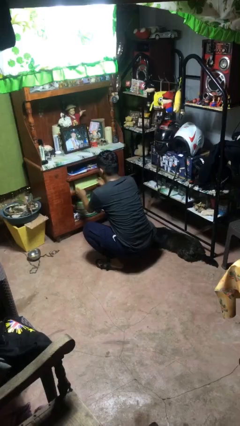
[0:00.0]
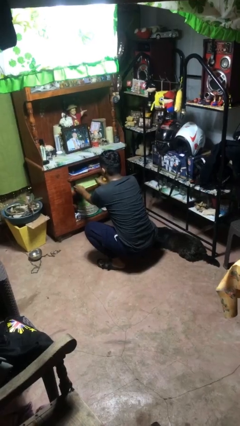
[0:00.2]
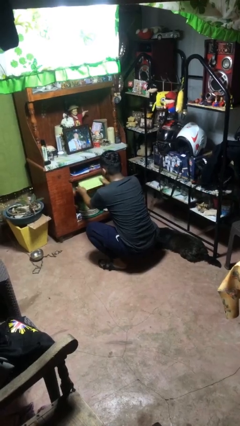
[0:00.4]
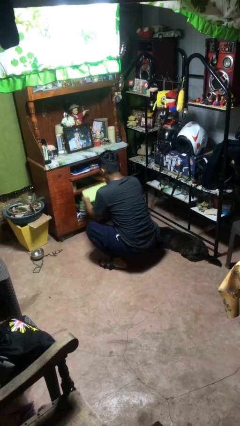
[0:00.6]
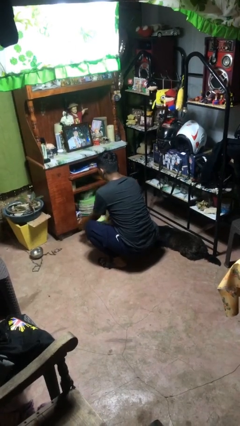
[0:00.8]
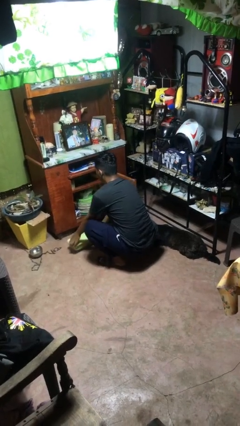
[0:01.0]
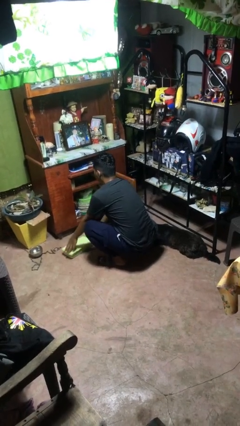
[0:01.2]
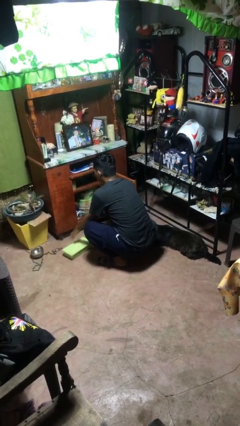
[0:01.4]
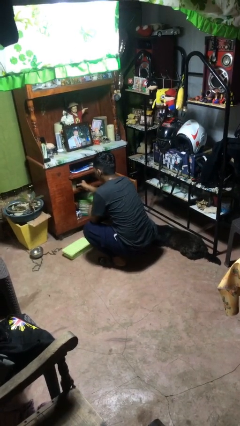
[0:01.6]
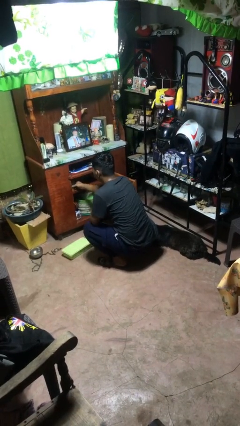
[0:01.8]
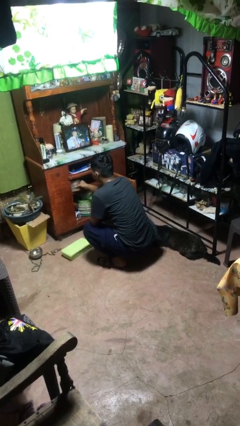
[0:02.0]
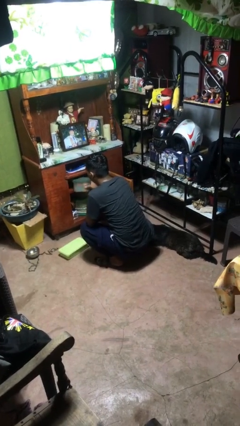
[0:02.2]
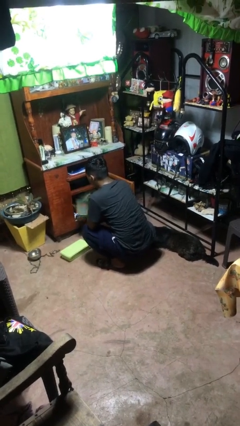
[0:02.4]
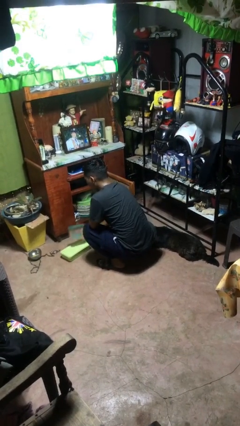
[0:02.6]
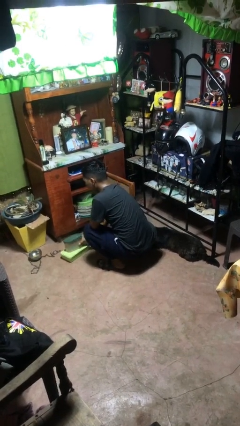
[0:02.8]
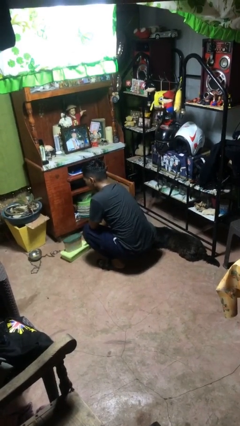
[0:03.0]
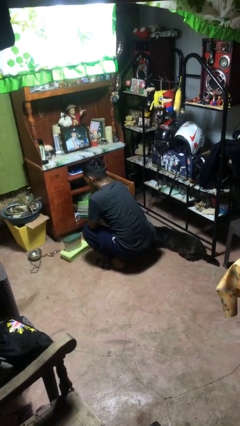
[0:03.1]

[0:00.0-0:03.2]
person takes object from cabinet

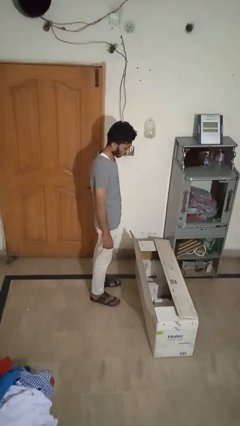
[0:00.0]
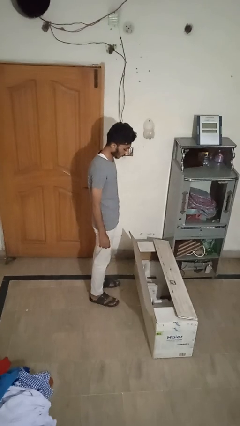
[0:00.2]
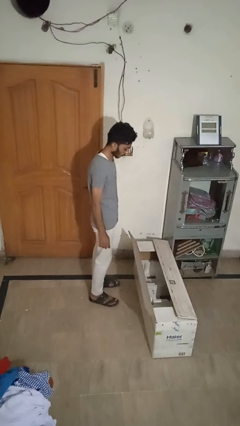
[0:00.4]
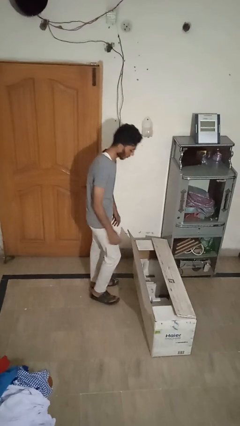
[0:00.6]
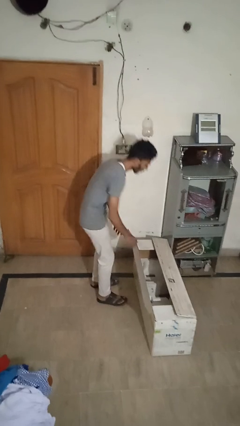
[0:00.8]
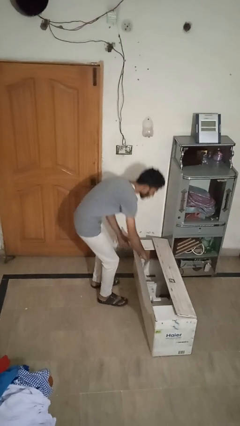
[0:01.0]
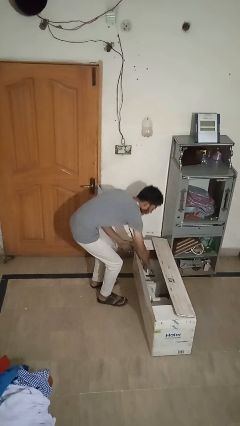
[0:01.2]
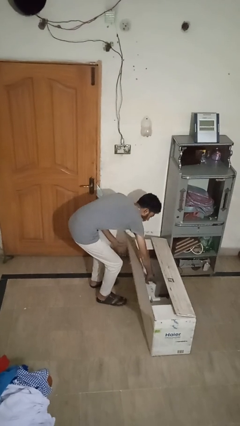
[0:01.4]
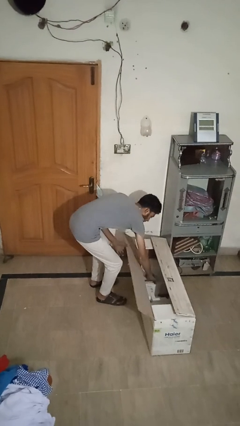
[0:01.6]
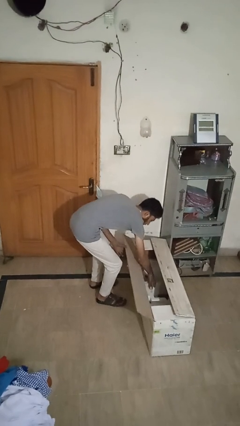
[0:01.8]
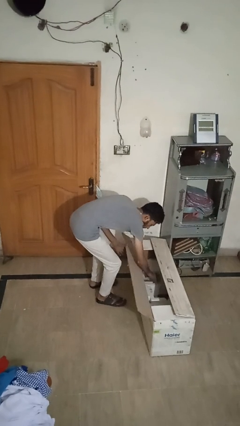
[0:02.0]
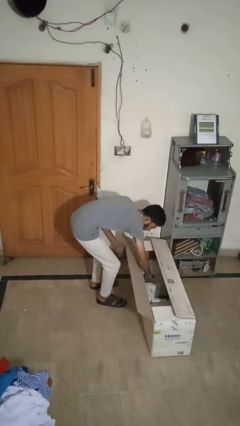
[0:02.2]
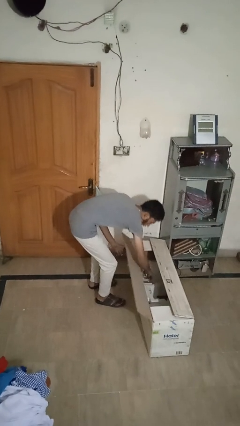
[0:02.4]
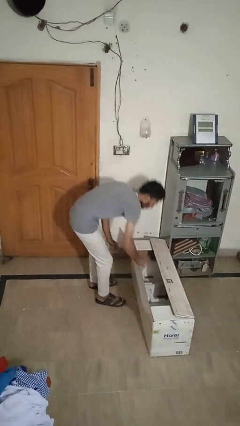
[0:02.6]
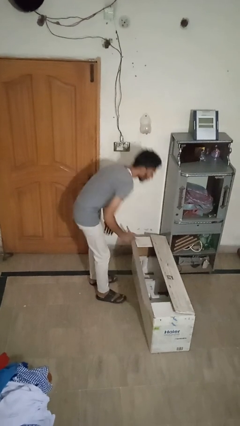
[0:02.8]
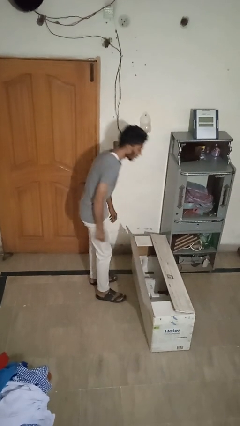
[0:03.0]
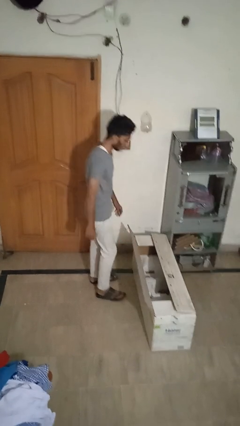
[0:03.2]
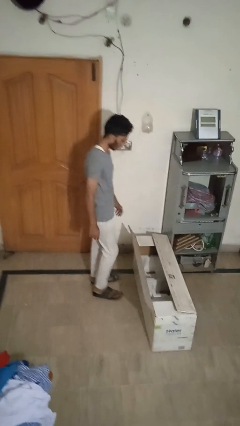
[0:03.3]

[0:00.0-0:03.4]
person searches in box

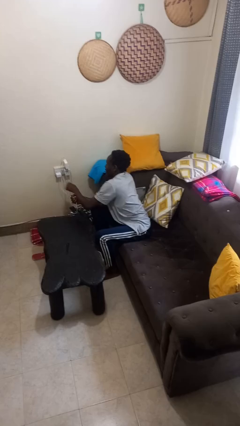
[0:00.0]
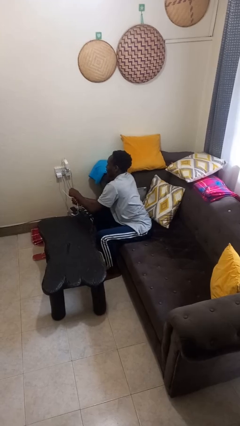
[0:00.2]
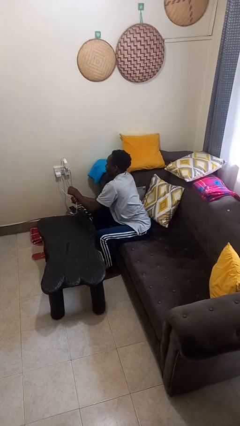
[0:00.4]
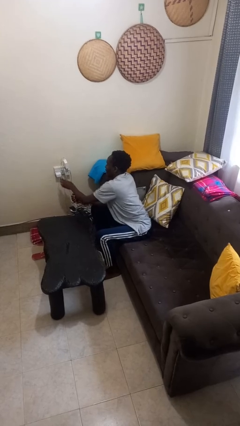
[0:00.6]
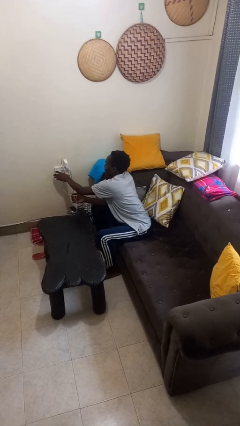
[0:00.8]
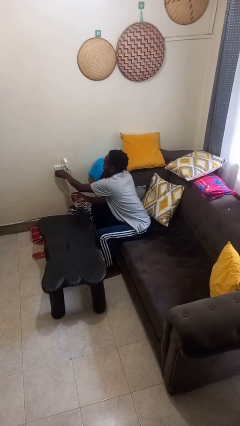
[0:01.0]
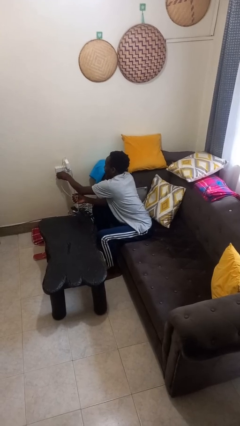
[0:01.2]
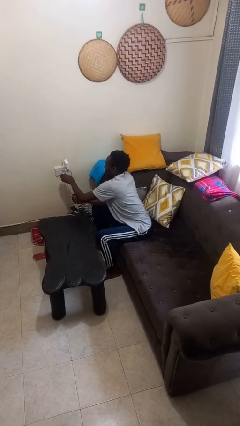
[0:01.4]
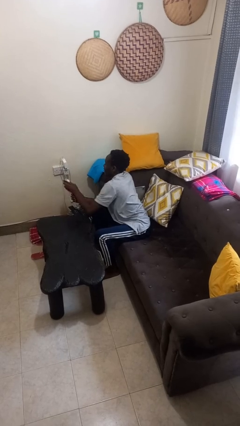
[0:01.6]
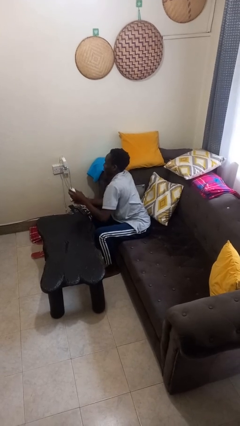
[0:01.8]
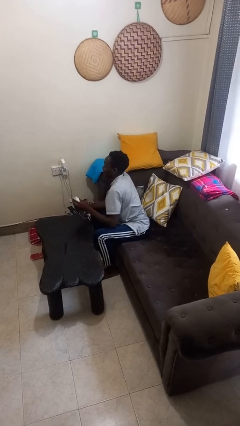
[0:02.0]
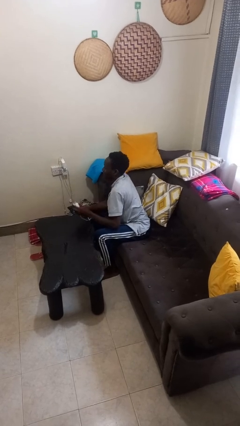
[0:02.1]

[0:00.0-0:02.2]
person unplugs from electrical socket

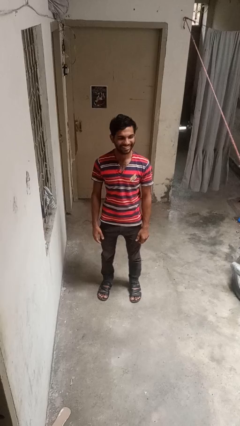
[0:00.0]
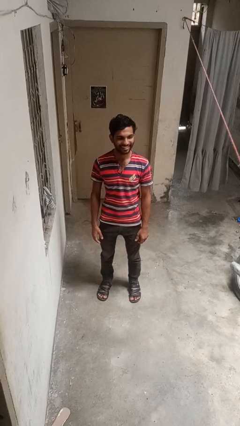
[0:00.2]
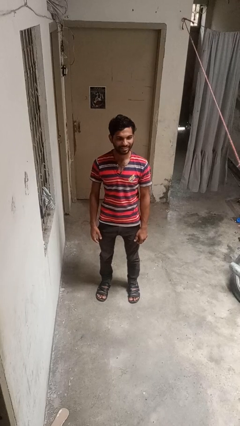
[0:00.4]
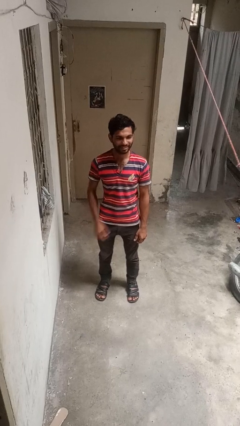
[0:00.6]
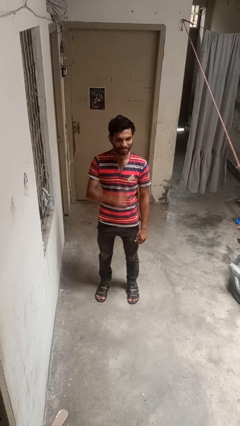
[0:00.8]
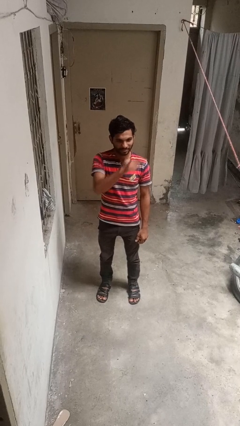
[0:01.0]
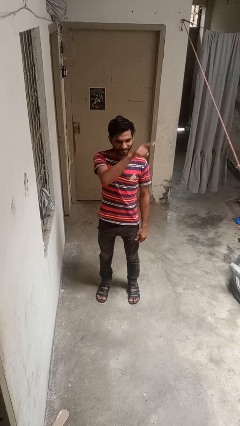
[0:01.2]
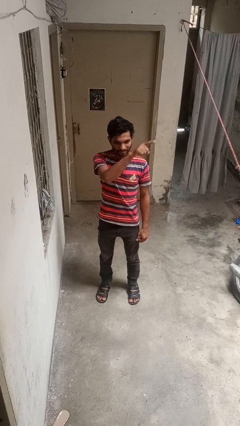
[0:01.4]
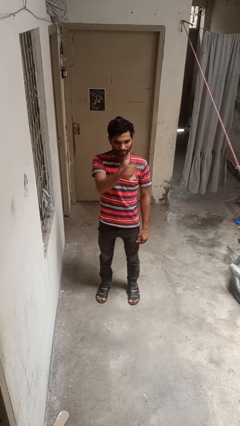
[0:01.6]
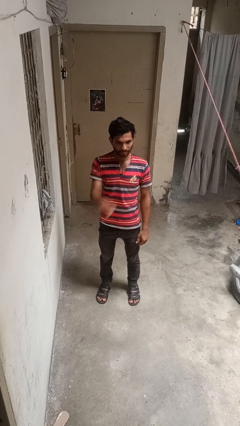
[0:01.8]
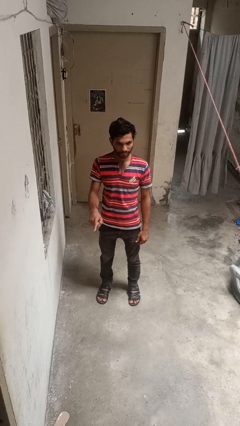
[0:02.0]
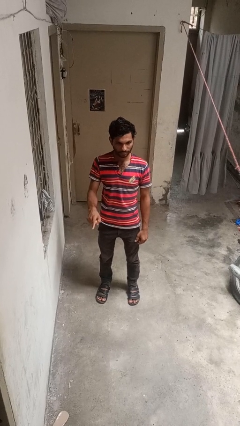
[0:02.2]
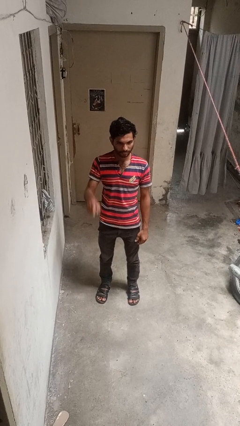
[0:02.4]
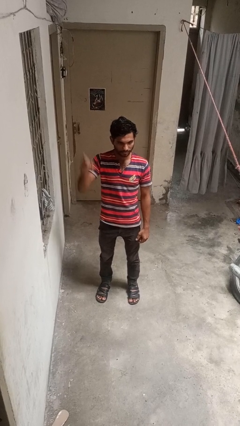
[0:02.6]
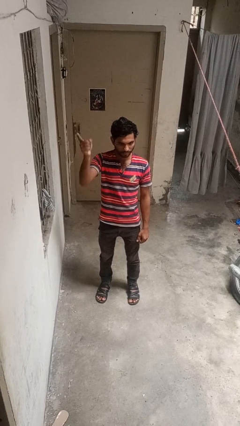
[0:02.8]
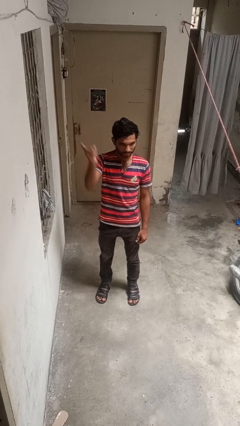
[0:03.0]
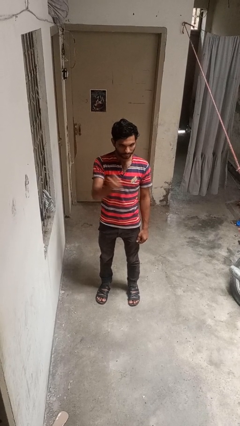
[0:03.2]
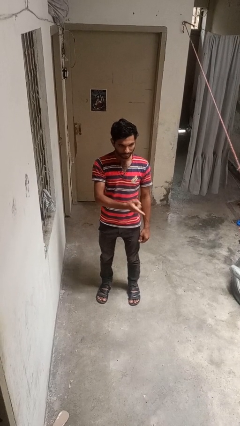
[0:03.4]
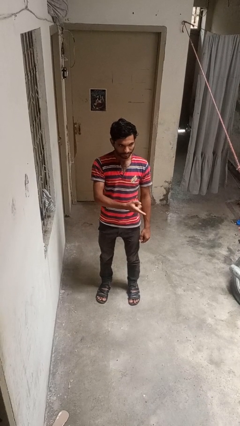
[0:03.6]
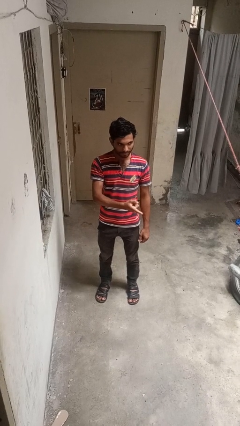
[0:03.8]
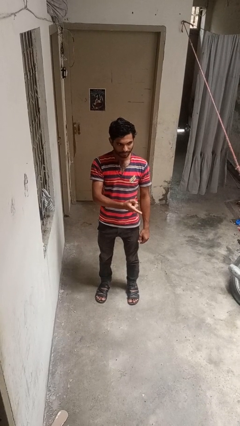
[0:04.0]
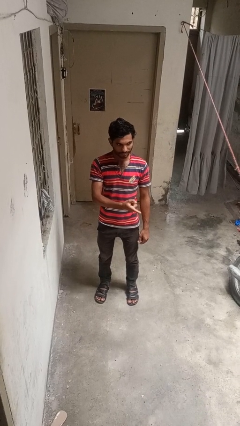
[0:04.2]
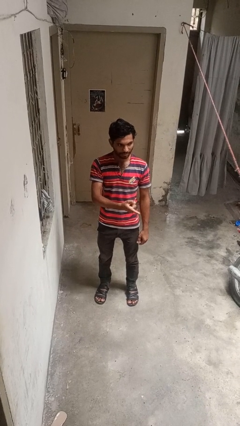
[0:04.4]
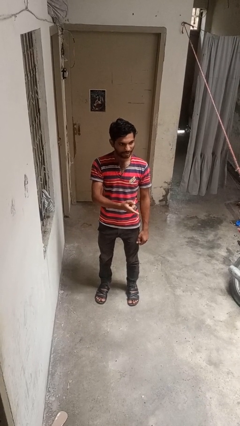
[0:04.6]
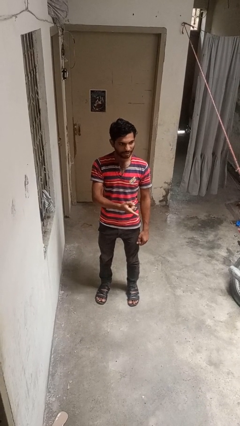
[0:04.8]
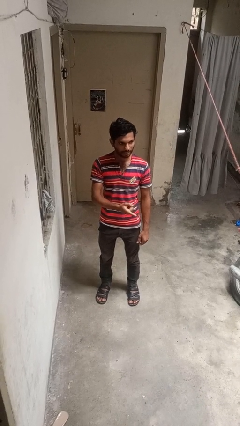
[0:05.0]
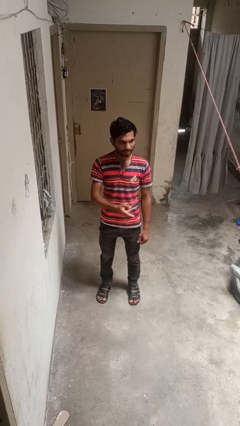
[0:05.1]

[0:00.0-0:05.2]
person gestures cut

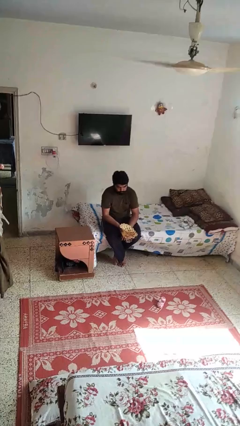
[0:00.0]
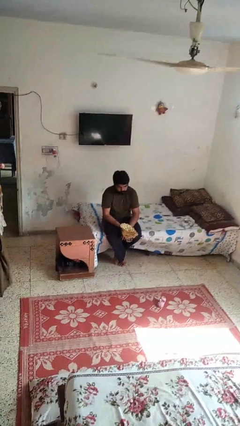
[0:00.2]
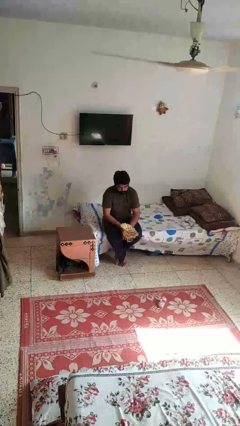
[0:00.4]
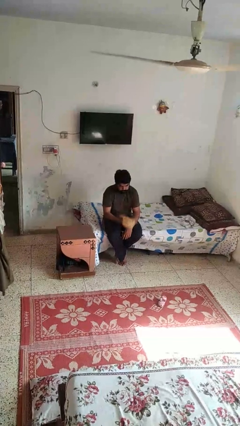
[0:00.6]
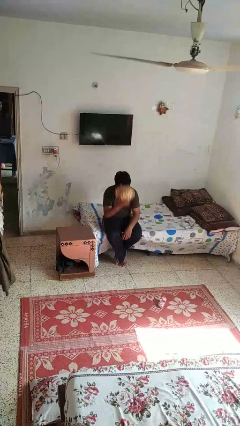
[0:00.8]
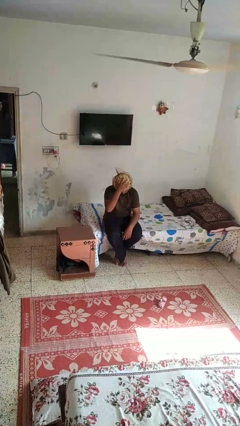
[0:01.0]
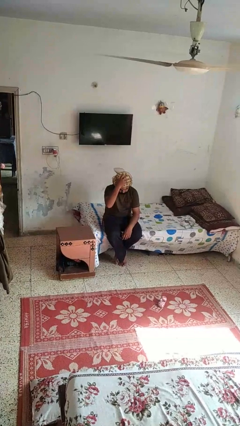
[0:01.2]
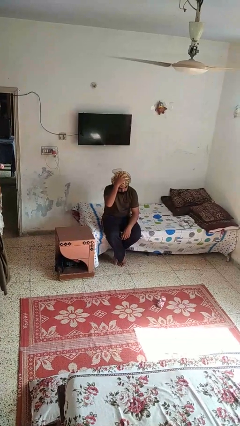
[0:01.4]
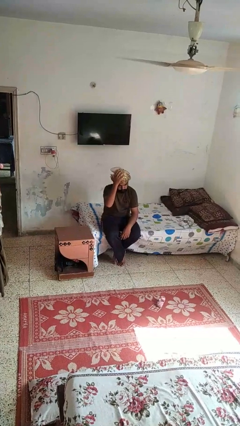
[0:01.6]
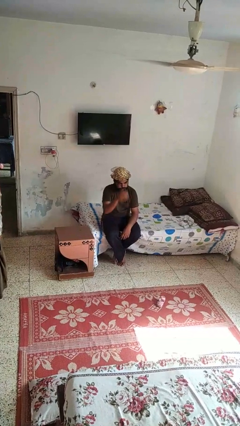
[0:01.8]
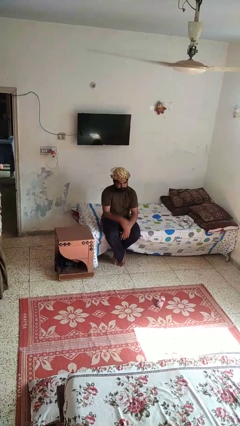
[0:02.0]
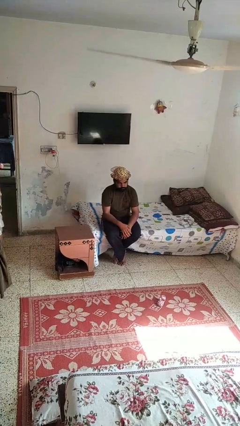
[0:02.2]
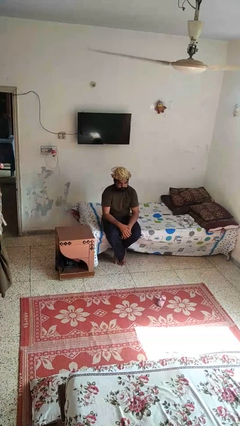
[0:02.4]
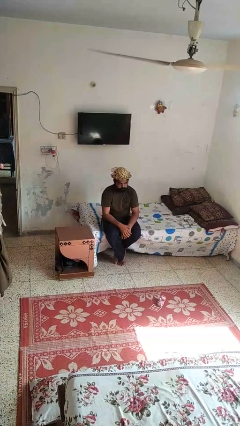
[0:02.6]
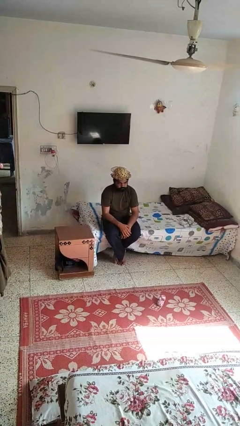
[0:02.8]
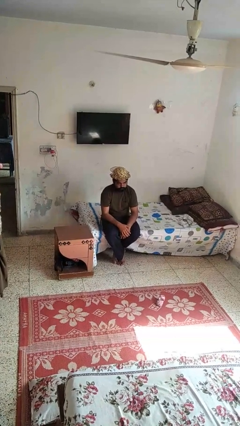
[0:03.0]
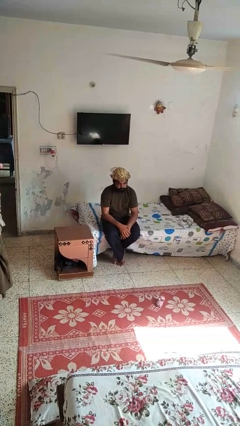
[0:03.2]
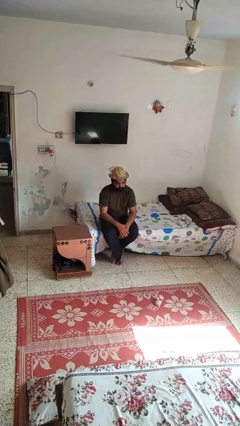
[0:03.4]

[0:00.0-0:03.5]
person puts on hat
